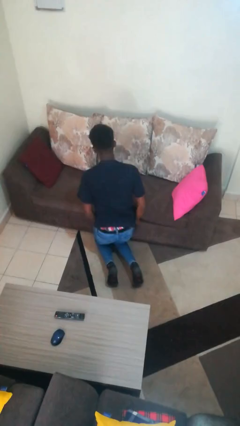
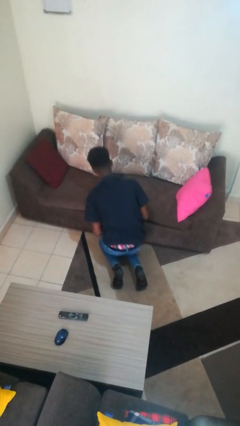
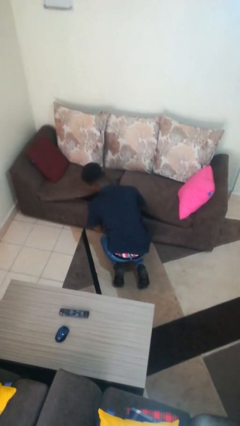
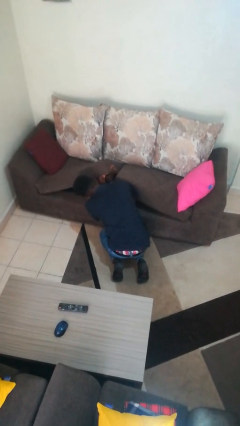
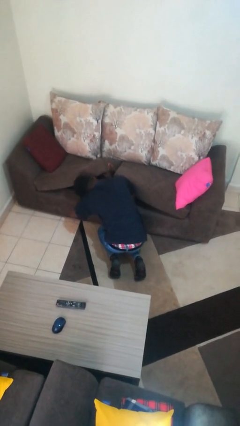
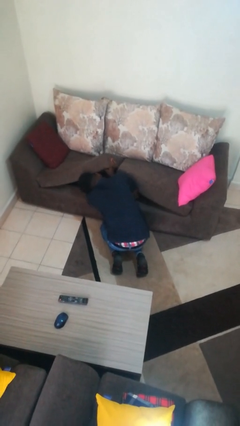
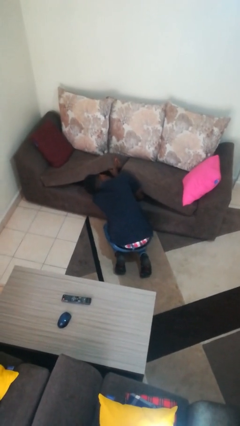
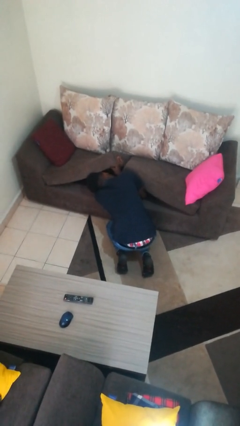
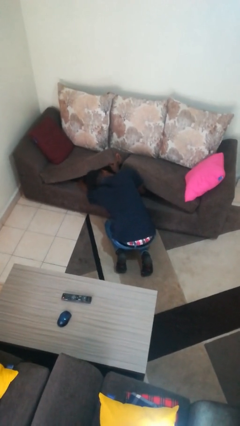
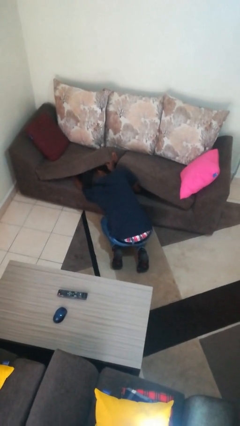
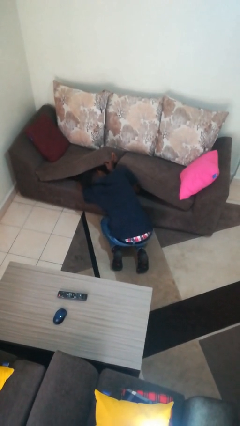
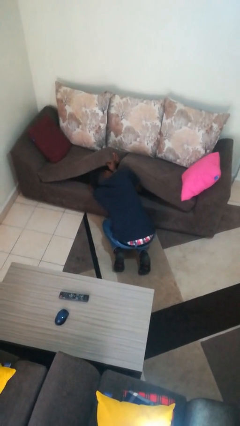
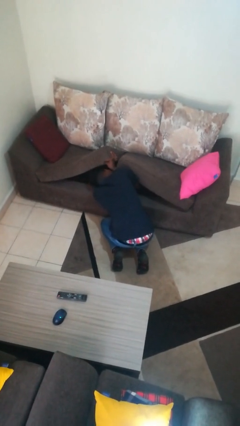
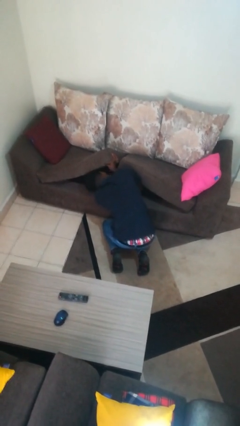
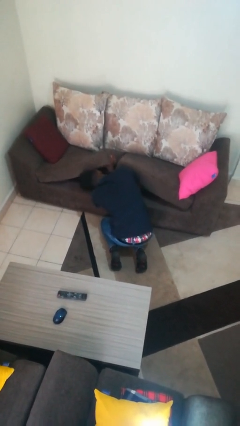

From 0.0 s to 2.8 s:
person searches under couch

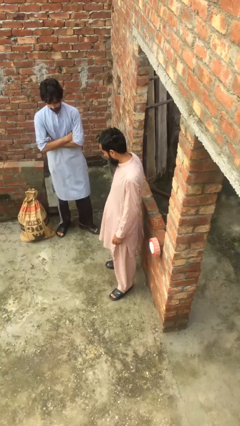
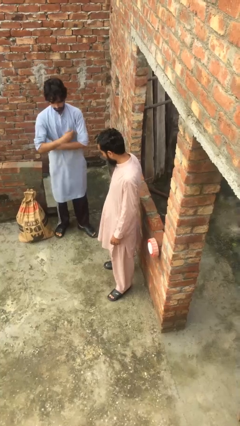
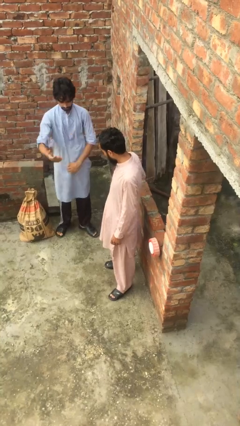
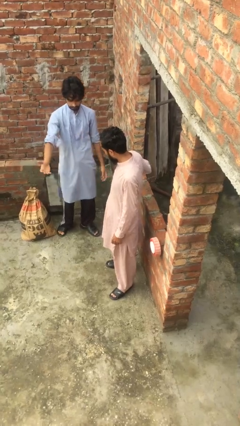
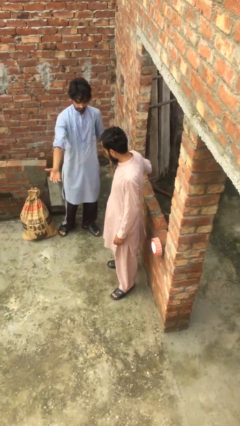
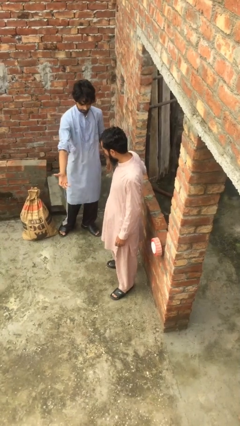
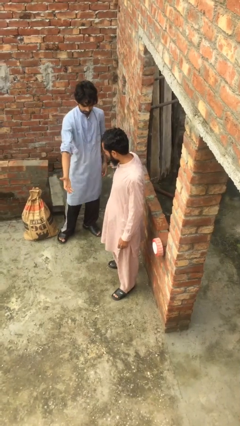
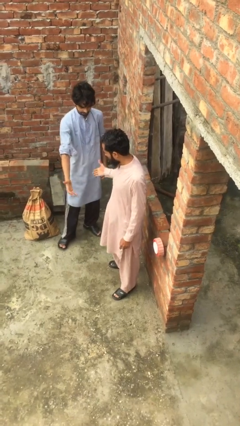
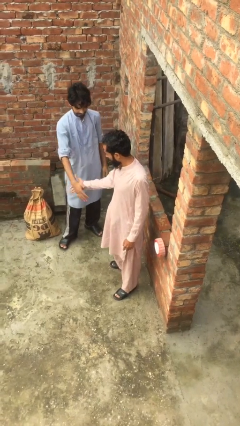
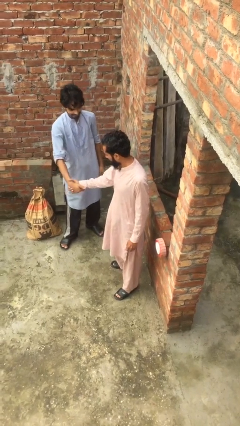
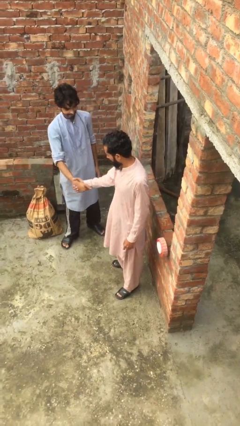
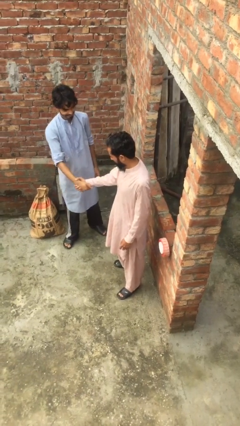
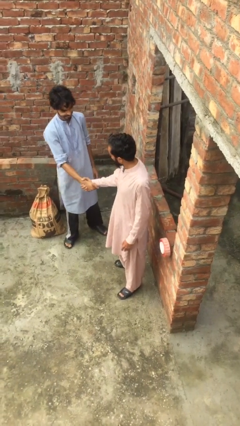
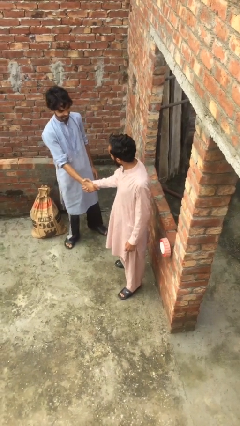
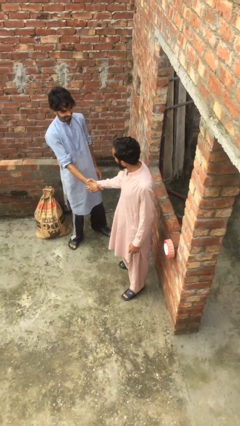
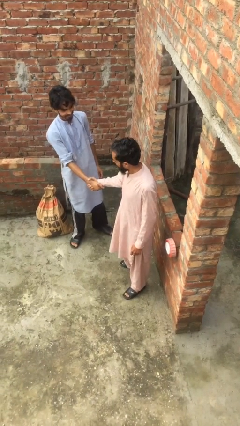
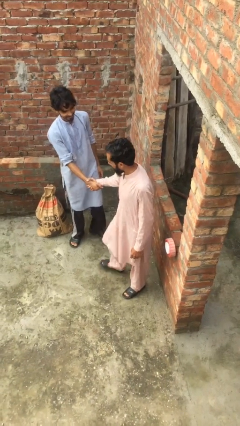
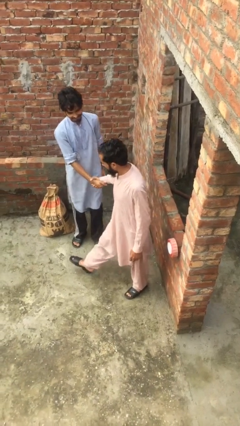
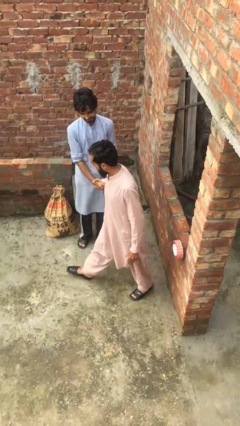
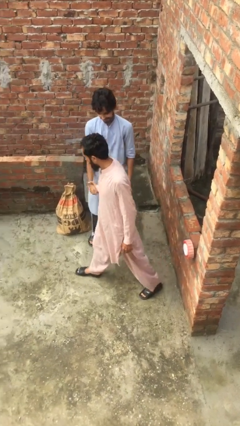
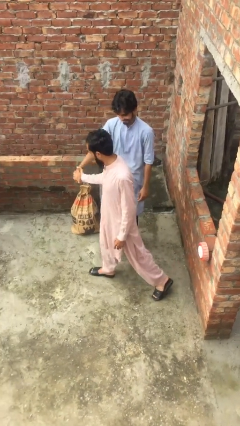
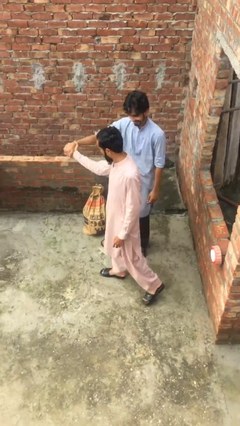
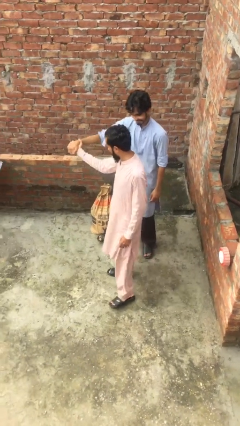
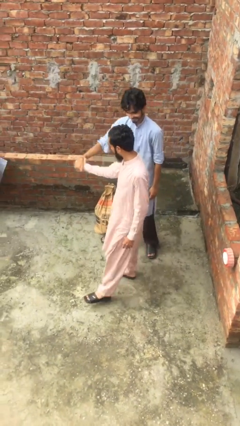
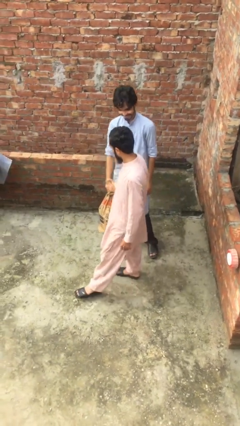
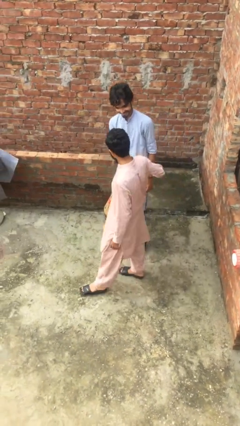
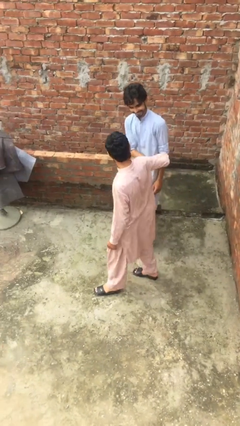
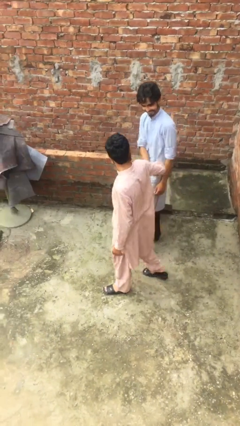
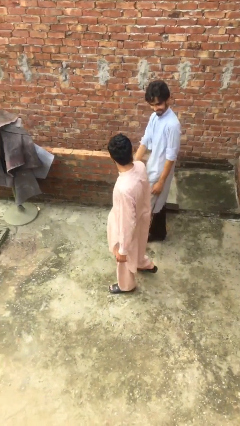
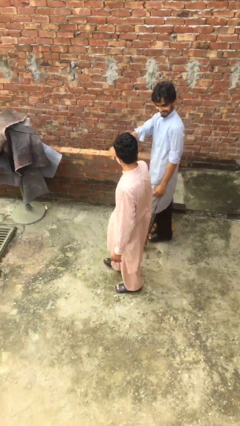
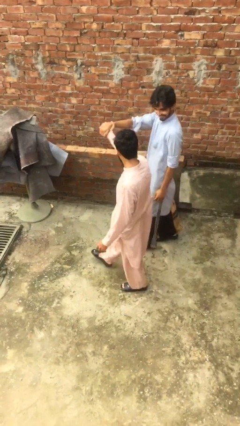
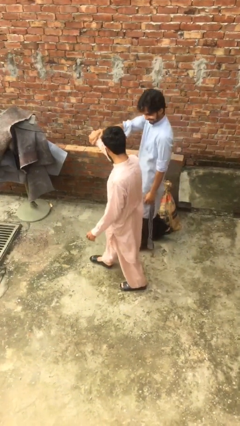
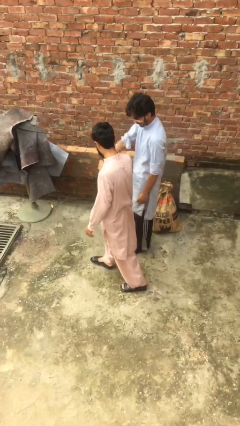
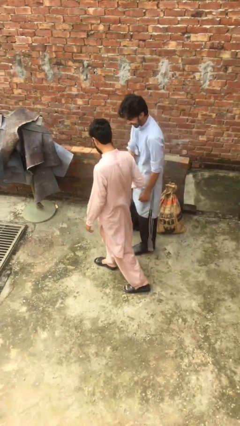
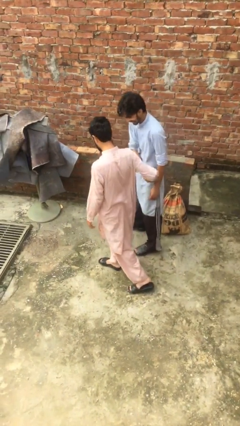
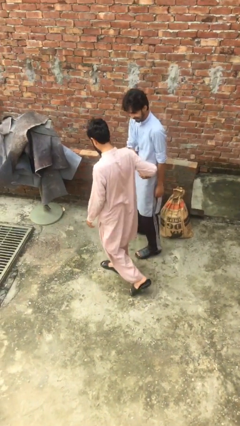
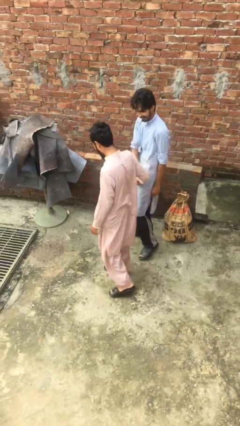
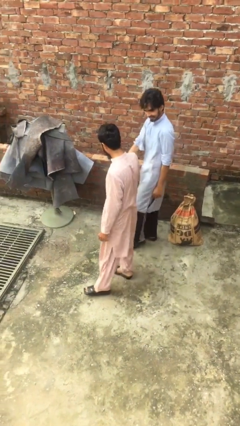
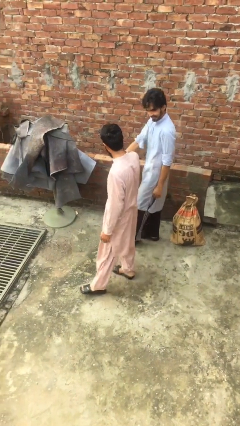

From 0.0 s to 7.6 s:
person holds hand

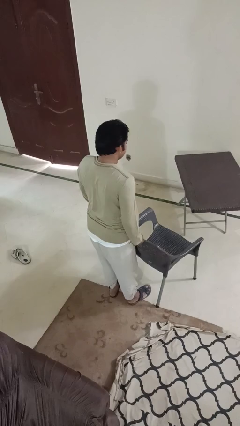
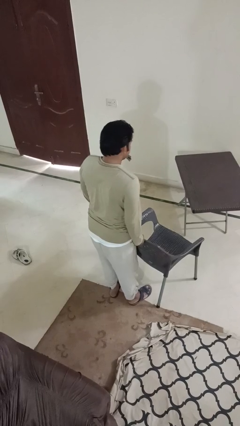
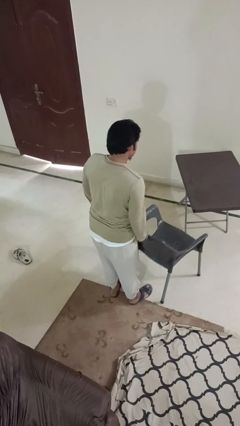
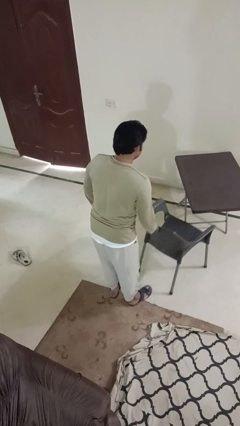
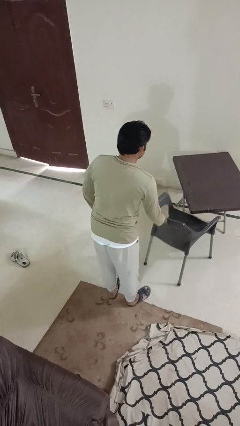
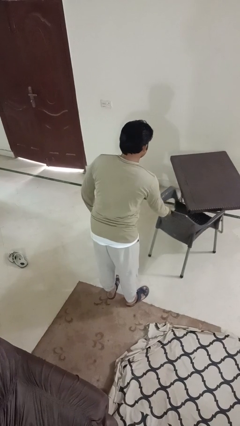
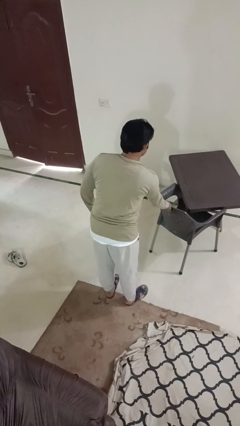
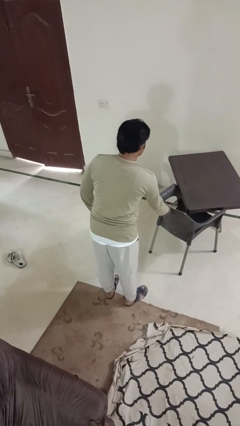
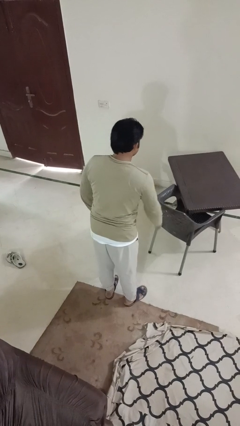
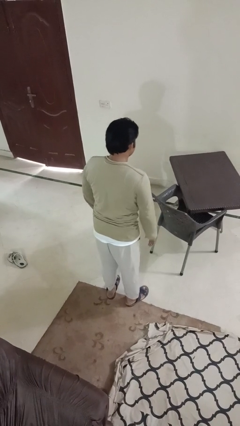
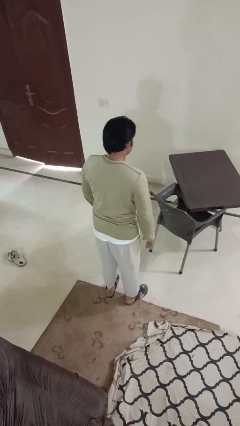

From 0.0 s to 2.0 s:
person pushes in chair

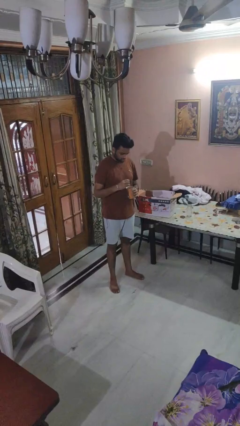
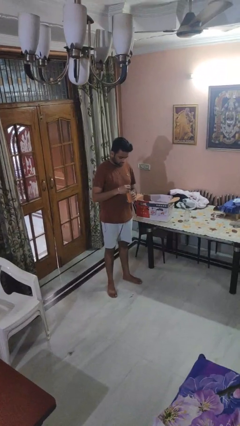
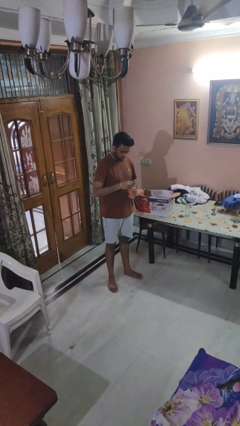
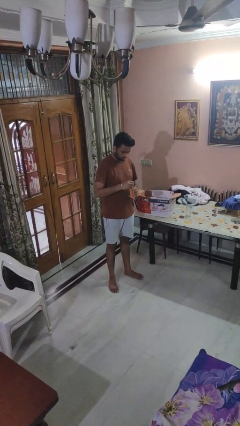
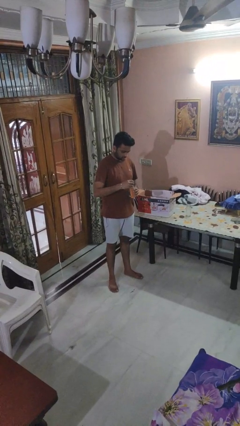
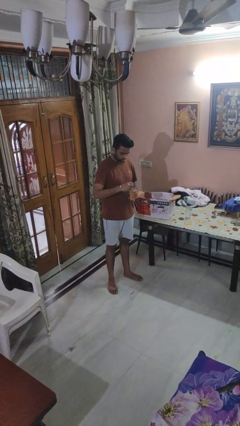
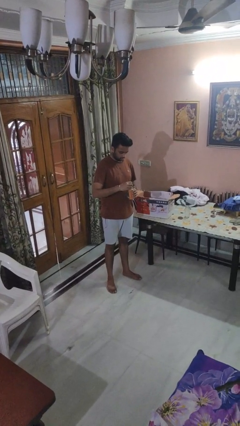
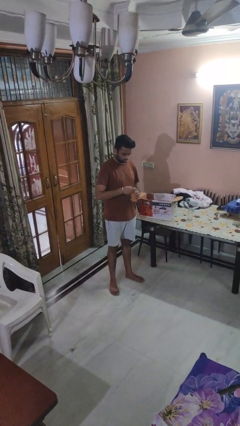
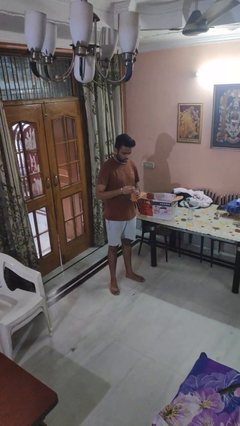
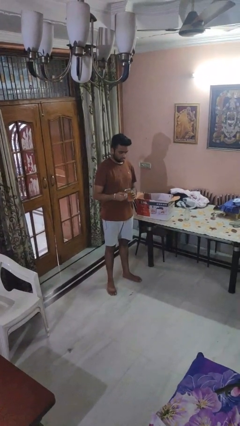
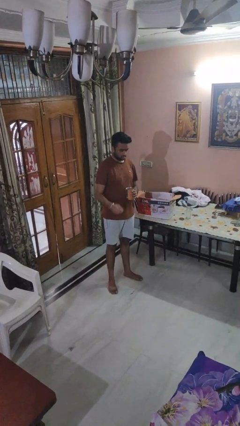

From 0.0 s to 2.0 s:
person opens can with can opener

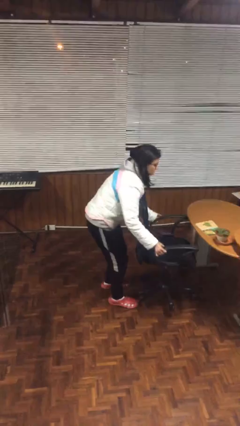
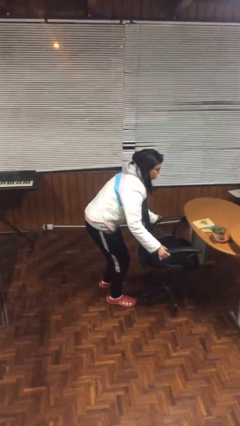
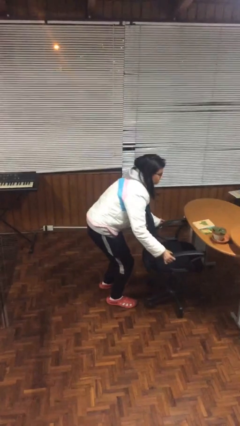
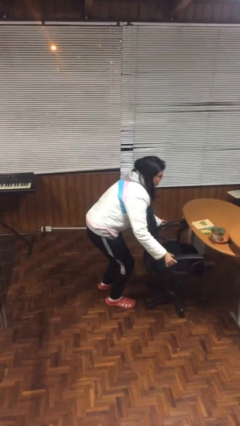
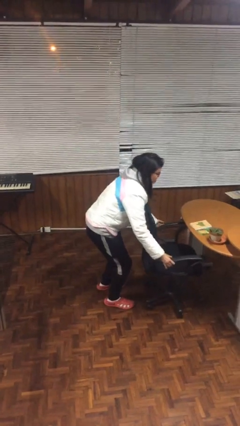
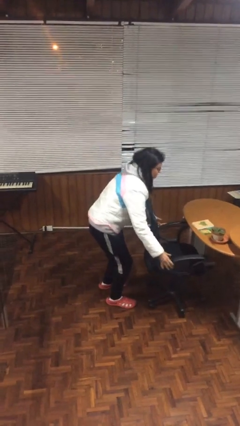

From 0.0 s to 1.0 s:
person puts down object on floor

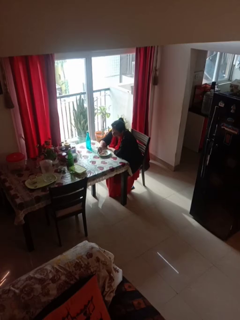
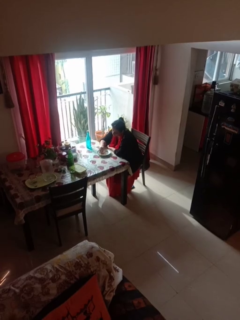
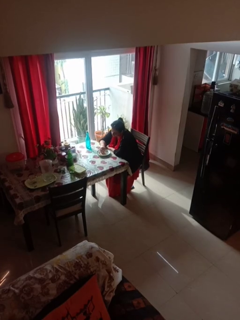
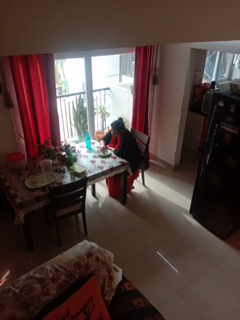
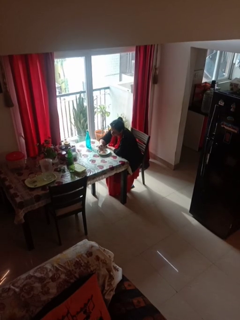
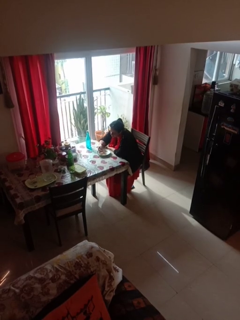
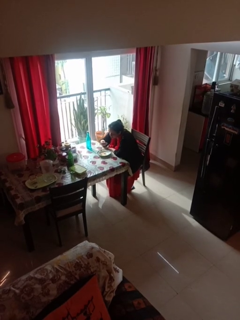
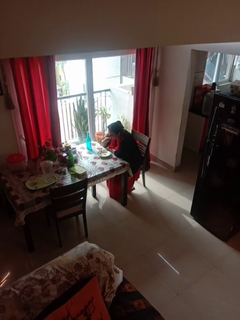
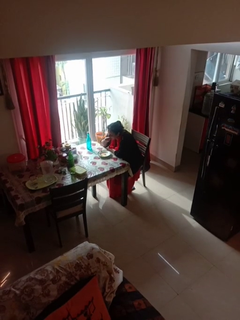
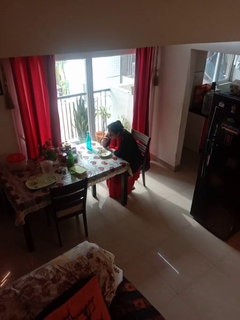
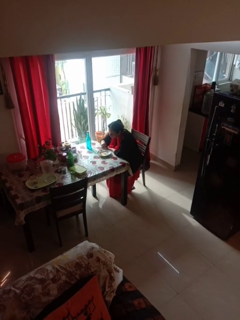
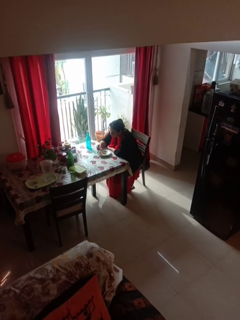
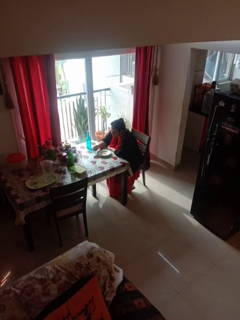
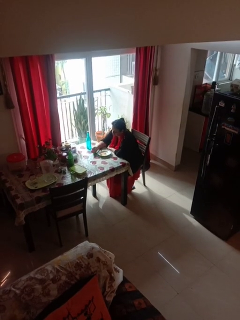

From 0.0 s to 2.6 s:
person eats with hands

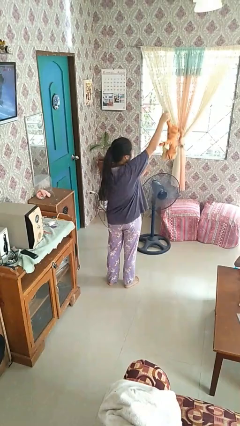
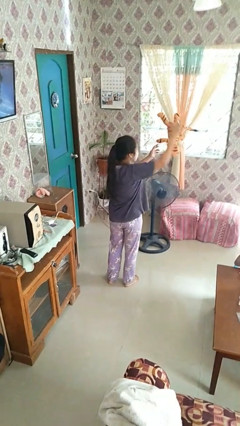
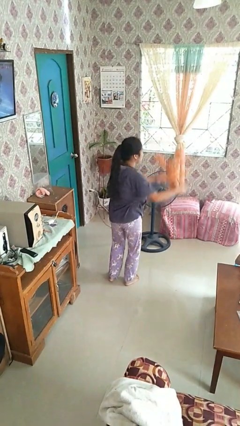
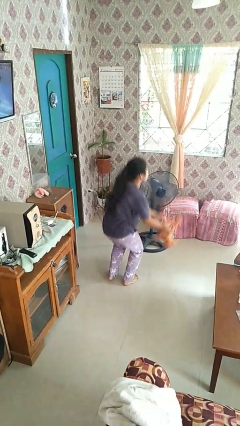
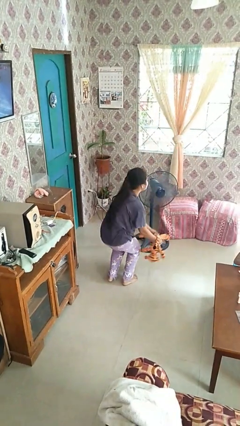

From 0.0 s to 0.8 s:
person drops object
